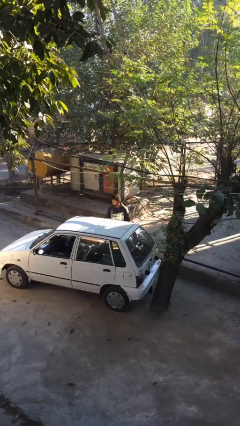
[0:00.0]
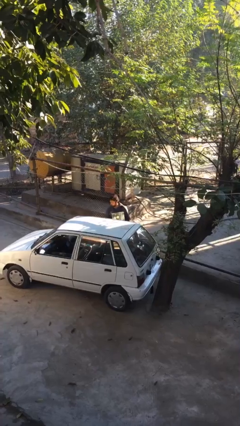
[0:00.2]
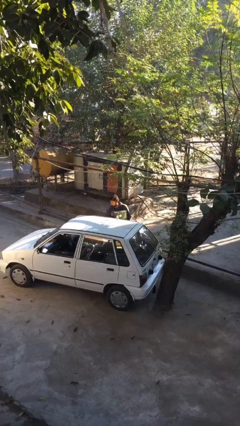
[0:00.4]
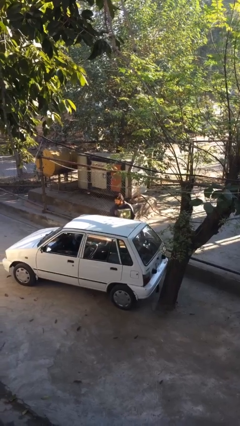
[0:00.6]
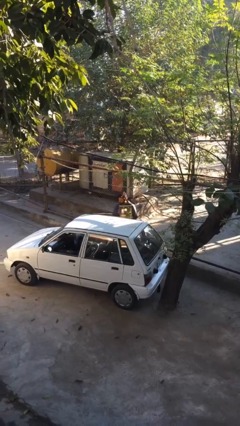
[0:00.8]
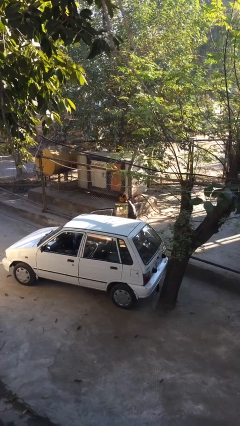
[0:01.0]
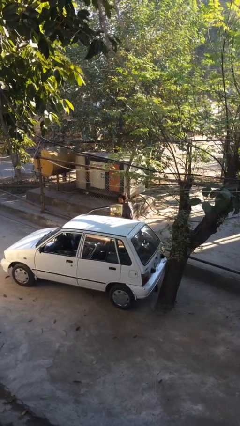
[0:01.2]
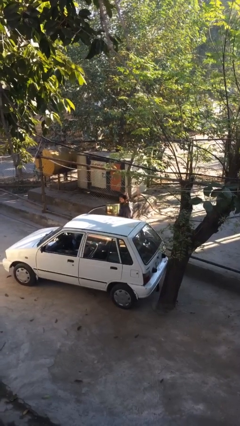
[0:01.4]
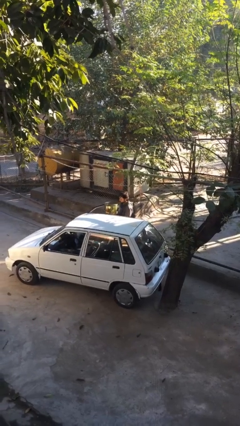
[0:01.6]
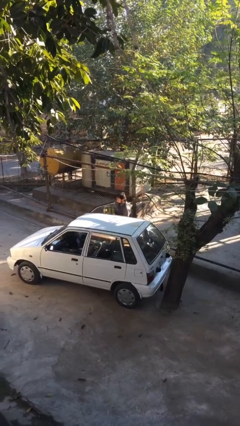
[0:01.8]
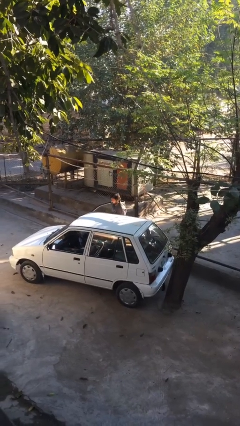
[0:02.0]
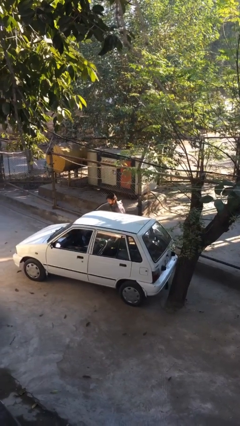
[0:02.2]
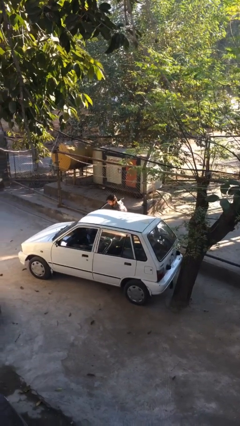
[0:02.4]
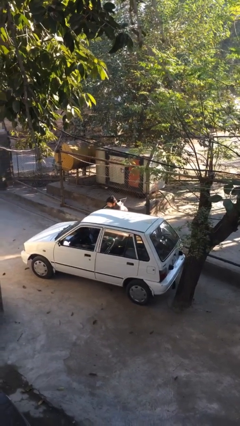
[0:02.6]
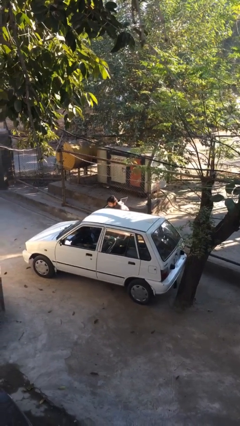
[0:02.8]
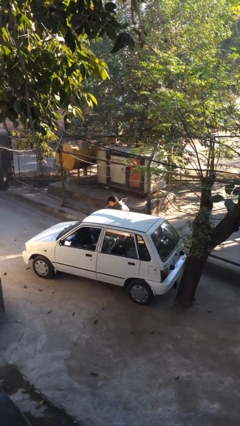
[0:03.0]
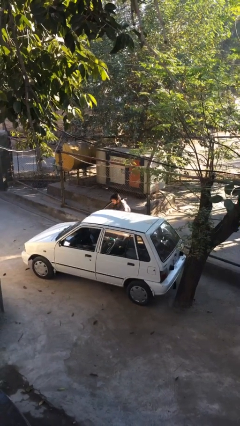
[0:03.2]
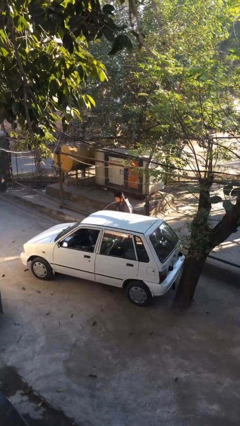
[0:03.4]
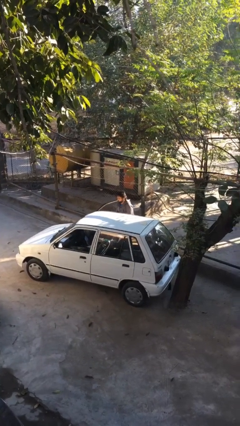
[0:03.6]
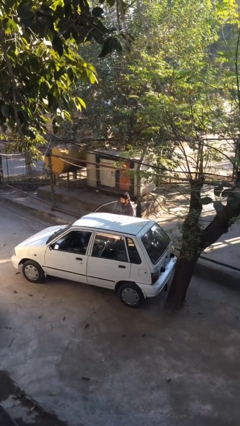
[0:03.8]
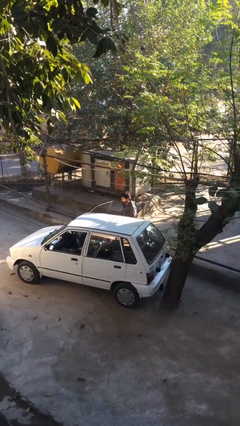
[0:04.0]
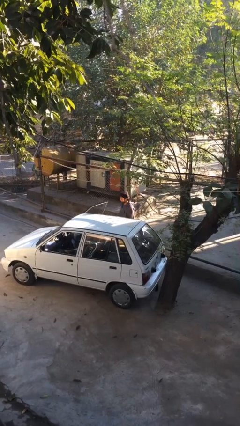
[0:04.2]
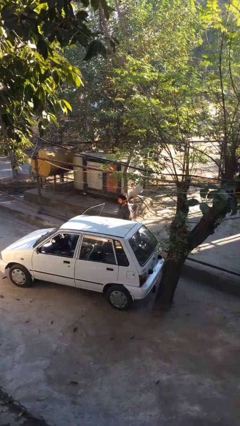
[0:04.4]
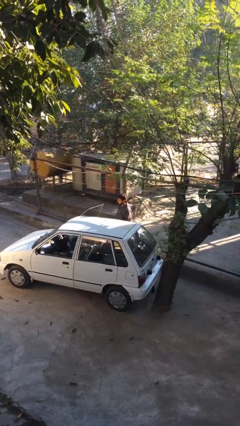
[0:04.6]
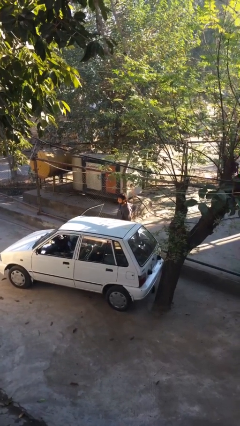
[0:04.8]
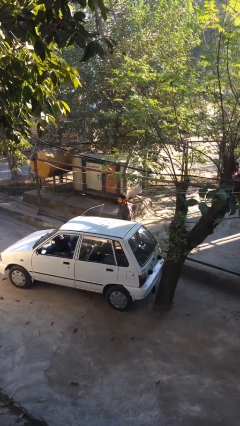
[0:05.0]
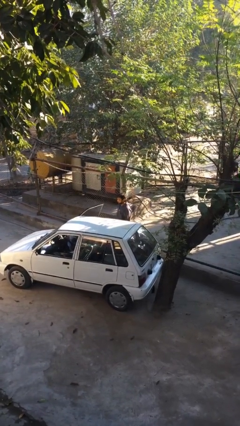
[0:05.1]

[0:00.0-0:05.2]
person loads car

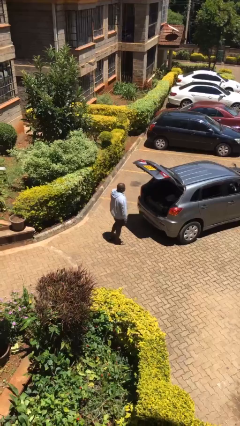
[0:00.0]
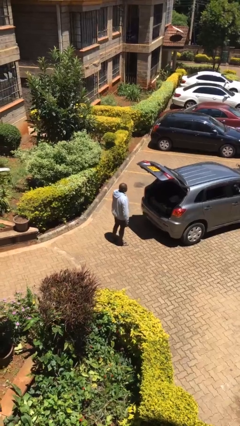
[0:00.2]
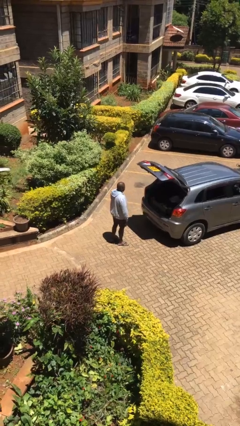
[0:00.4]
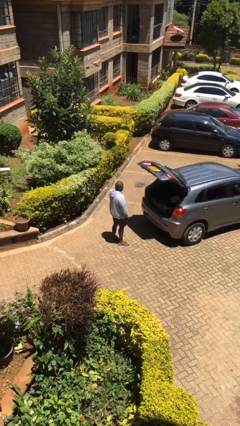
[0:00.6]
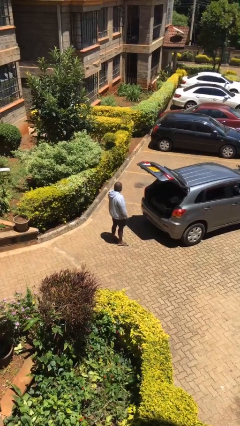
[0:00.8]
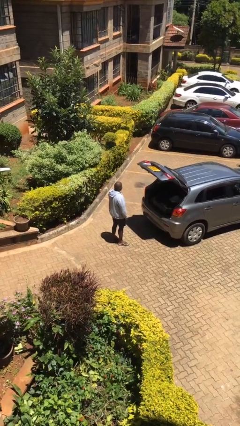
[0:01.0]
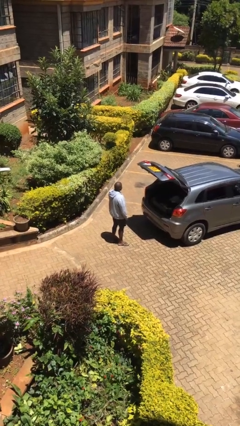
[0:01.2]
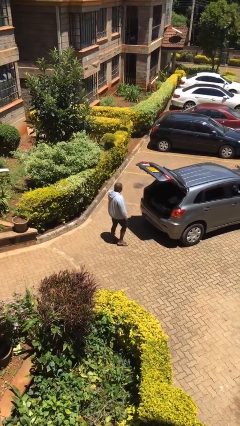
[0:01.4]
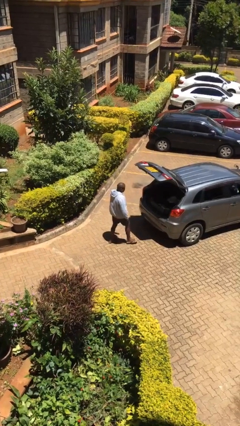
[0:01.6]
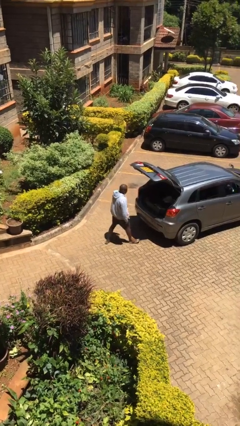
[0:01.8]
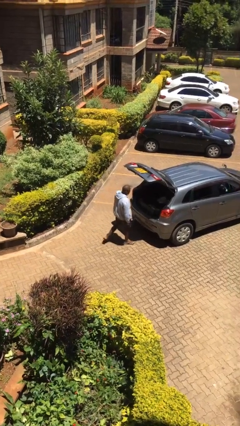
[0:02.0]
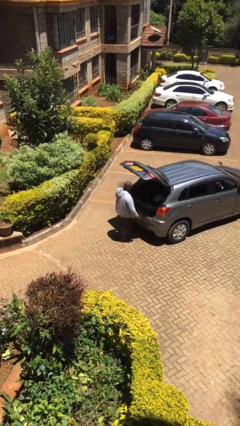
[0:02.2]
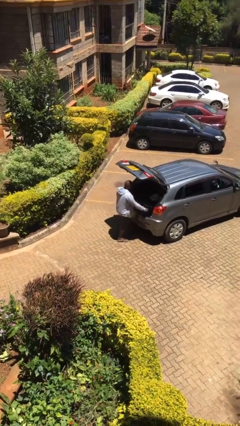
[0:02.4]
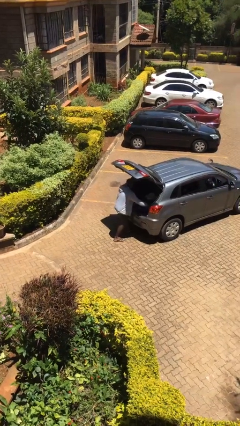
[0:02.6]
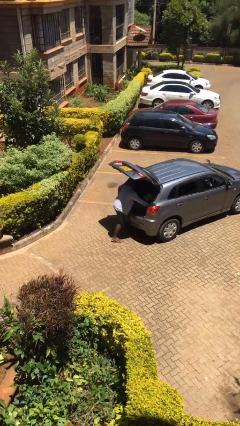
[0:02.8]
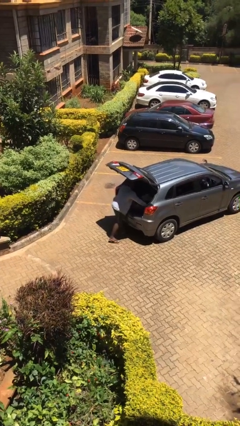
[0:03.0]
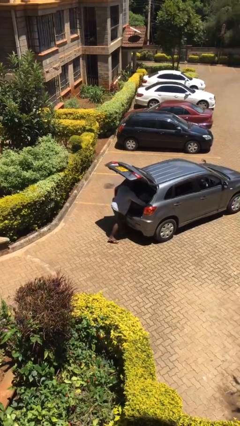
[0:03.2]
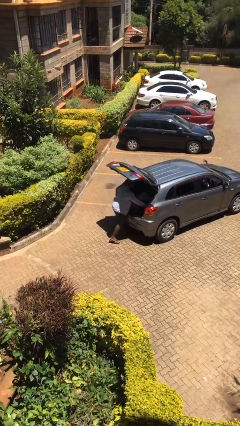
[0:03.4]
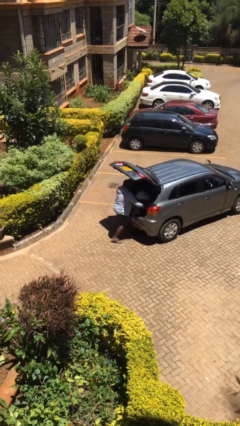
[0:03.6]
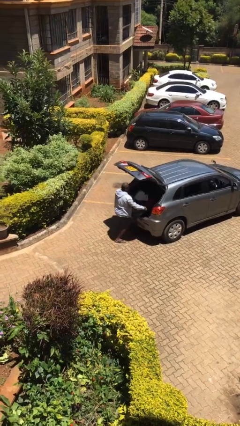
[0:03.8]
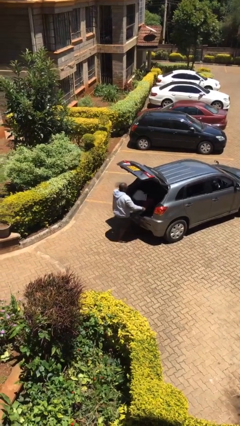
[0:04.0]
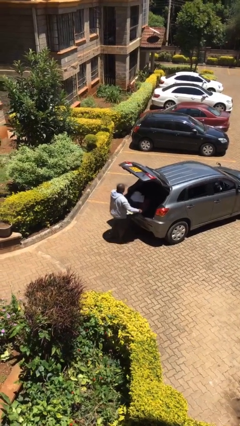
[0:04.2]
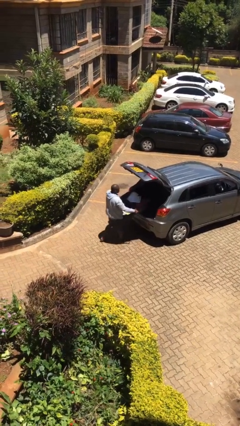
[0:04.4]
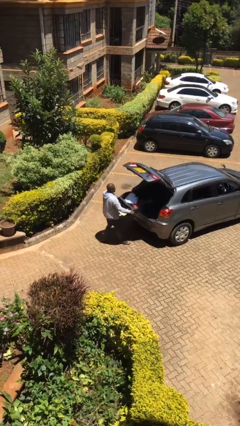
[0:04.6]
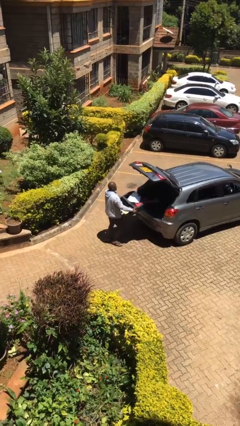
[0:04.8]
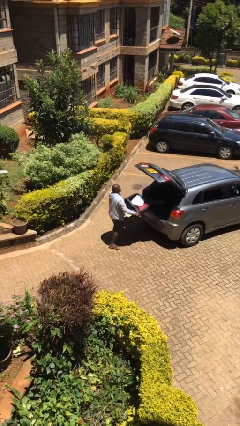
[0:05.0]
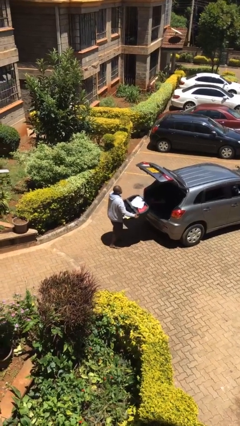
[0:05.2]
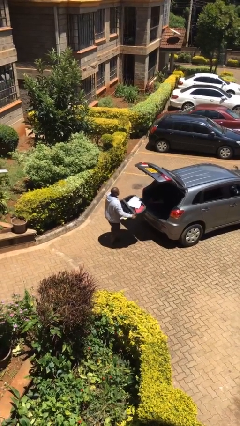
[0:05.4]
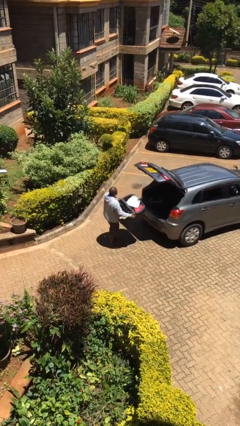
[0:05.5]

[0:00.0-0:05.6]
person unloads car

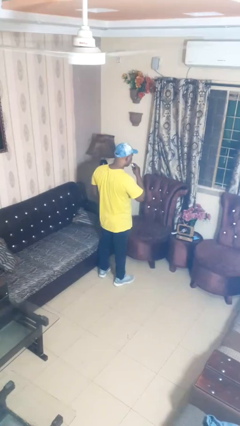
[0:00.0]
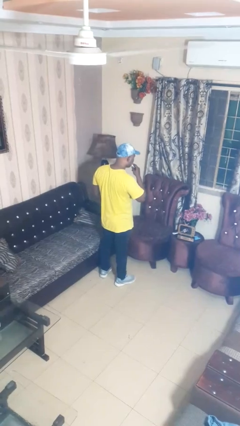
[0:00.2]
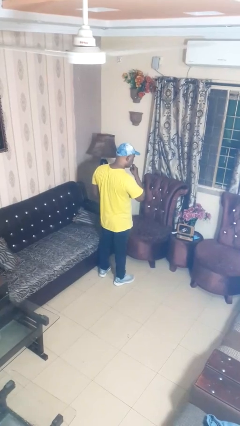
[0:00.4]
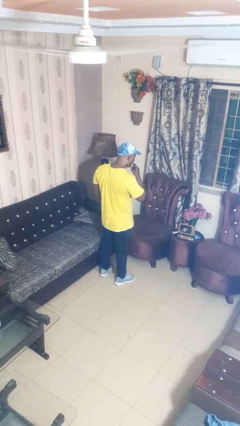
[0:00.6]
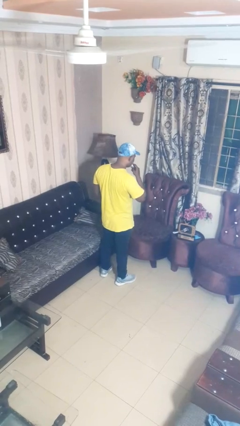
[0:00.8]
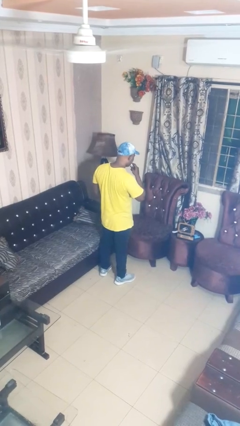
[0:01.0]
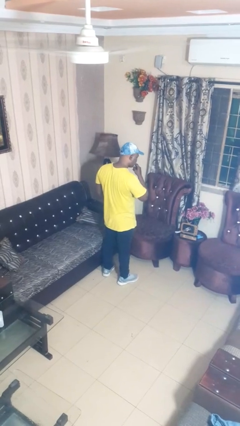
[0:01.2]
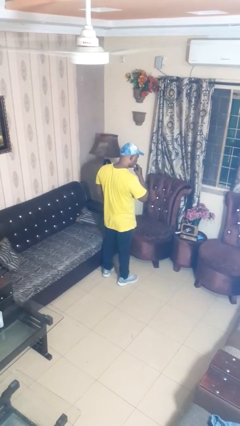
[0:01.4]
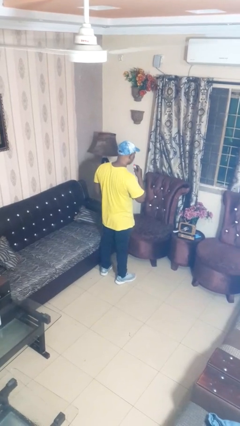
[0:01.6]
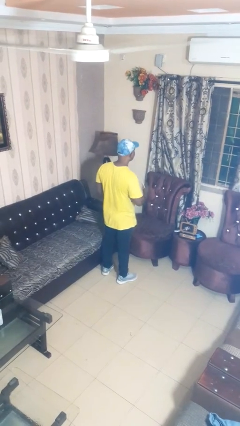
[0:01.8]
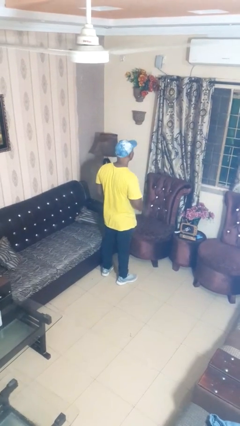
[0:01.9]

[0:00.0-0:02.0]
person applies lip makeup

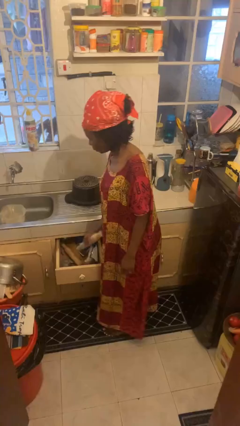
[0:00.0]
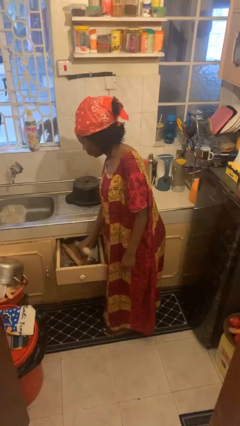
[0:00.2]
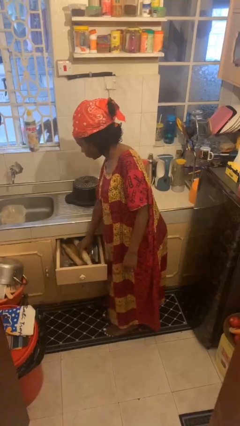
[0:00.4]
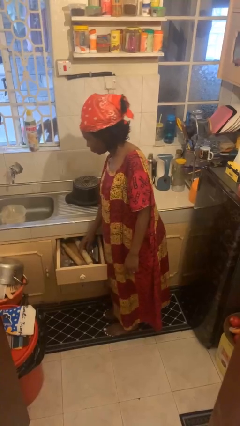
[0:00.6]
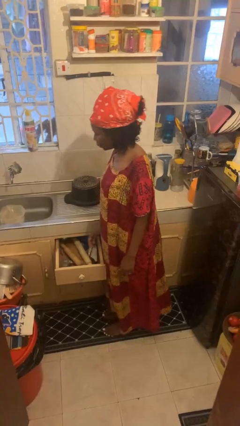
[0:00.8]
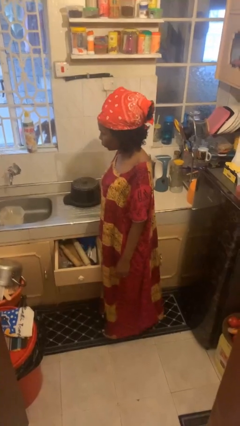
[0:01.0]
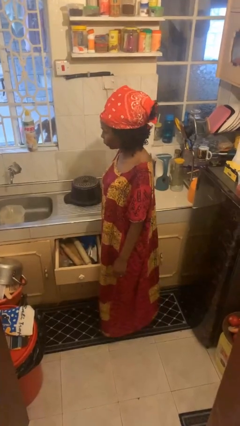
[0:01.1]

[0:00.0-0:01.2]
person puts object into kitchen drawer

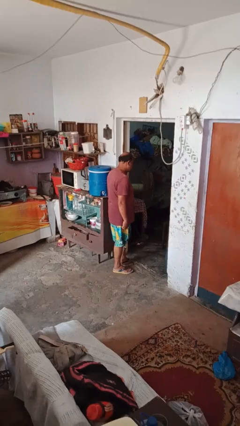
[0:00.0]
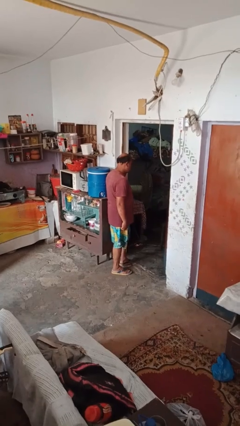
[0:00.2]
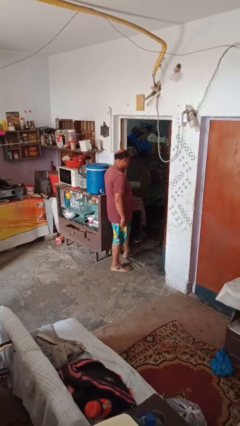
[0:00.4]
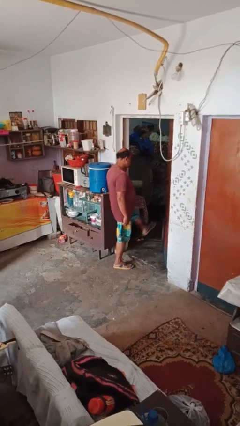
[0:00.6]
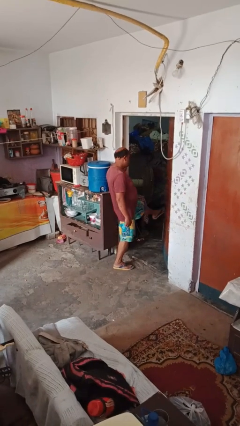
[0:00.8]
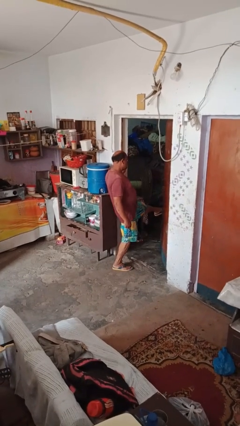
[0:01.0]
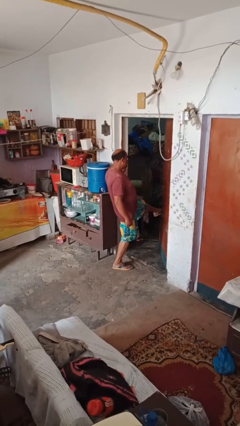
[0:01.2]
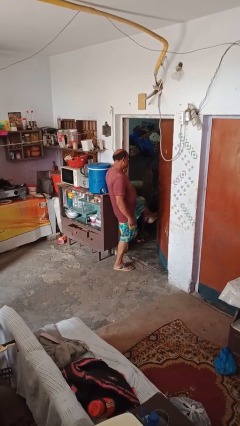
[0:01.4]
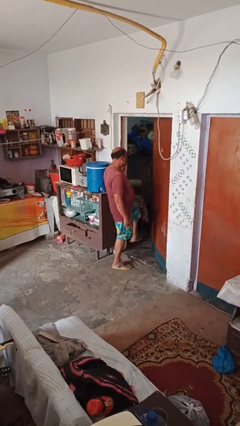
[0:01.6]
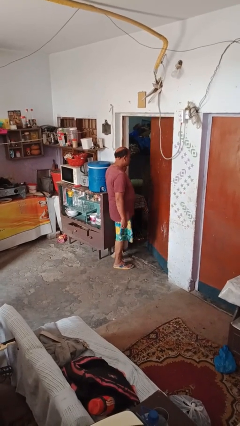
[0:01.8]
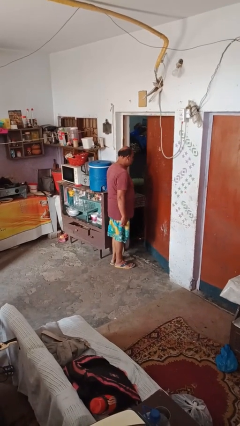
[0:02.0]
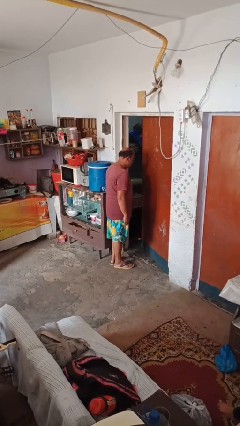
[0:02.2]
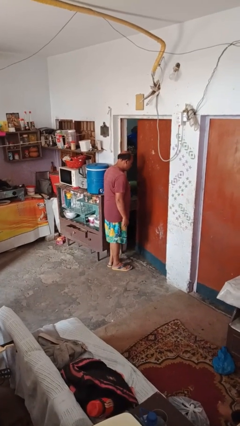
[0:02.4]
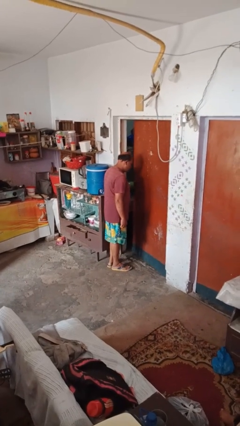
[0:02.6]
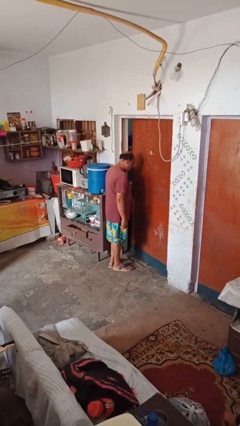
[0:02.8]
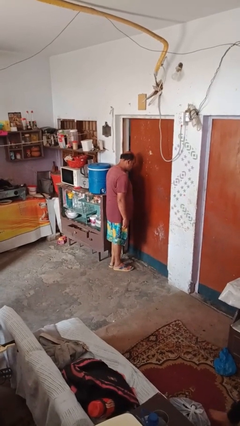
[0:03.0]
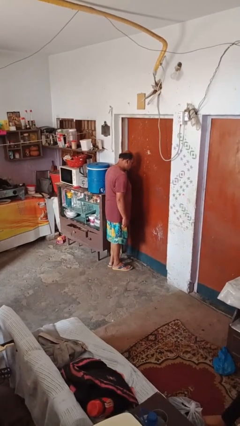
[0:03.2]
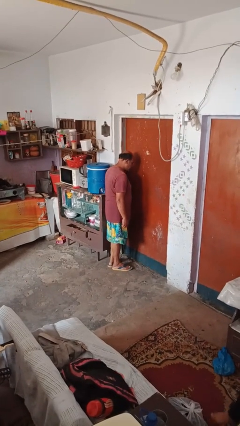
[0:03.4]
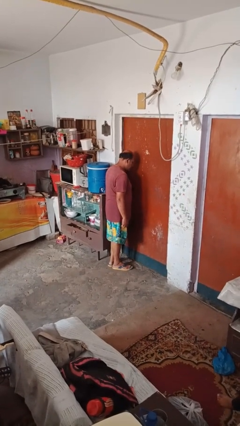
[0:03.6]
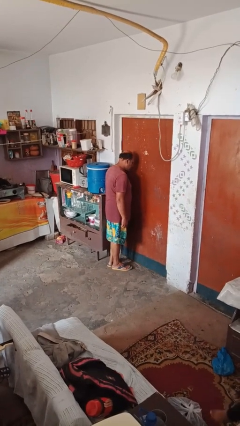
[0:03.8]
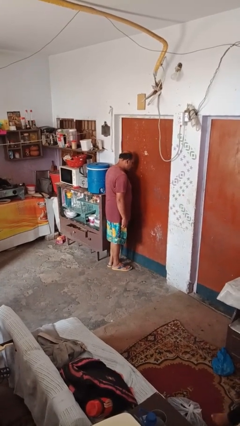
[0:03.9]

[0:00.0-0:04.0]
person closes door with foot
